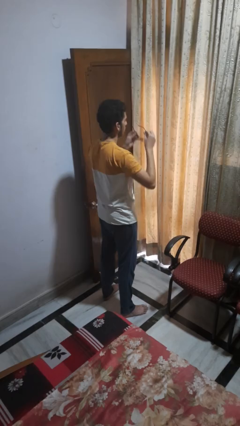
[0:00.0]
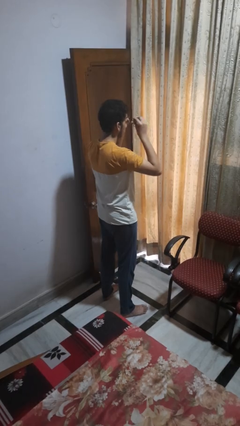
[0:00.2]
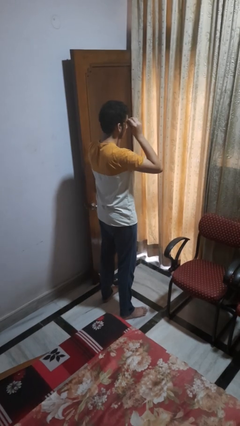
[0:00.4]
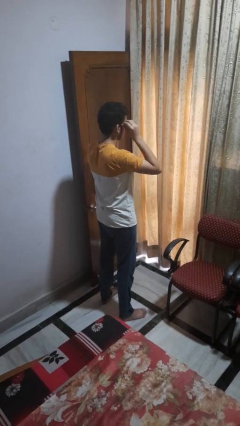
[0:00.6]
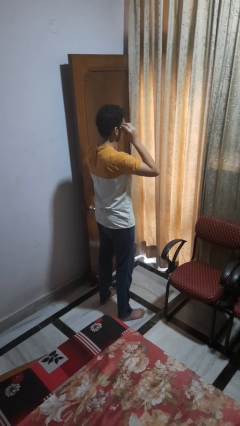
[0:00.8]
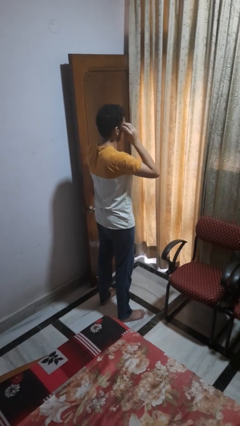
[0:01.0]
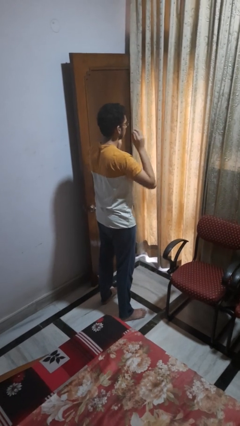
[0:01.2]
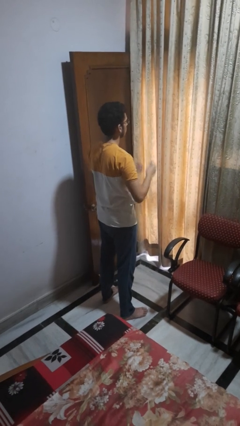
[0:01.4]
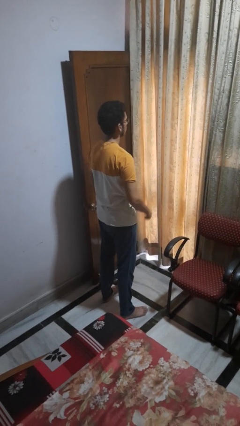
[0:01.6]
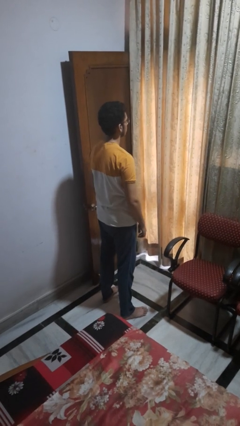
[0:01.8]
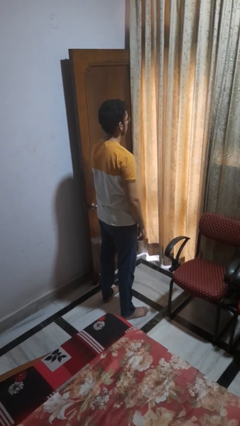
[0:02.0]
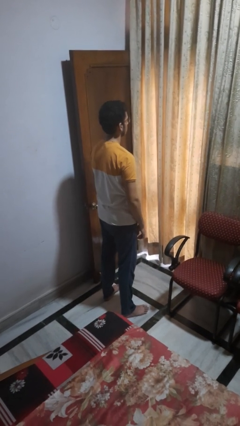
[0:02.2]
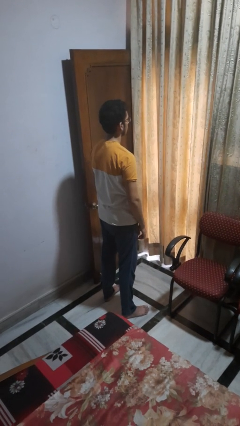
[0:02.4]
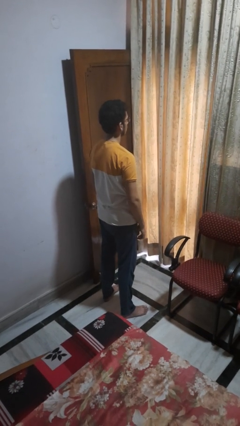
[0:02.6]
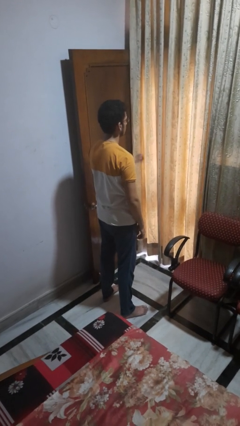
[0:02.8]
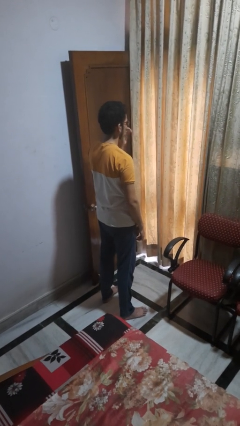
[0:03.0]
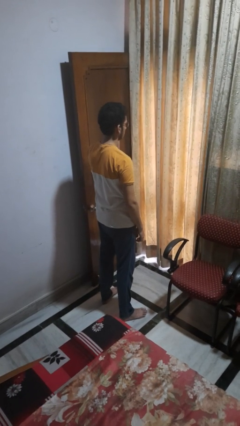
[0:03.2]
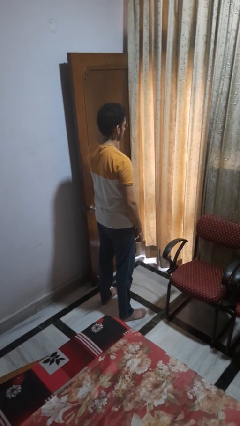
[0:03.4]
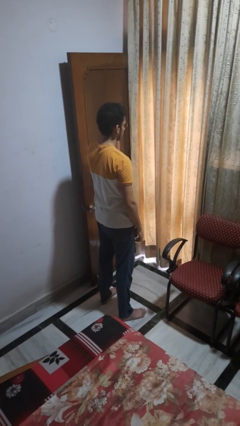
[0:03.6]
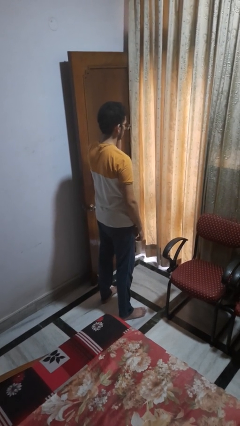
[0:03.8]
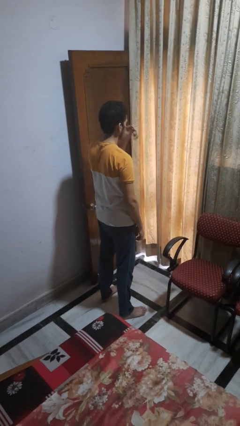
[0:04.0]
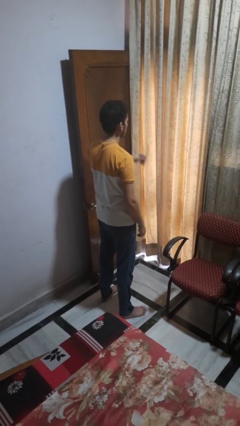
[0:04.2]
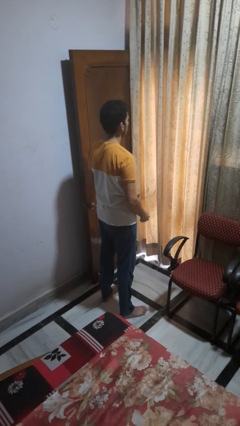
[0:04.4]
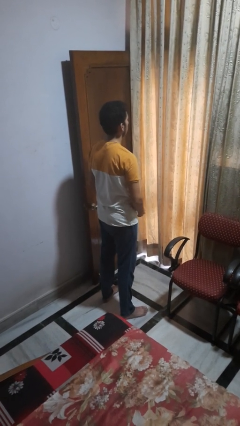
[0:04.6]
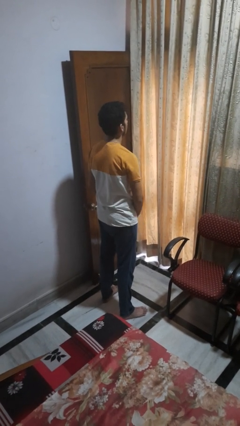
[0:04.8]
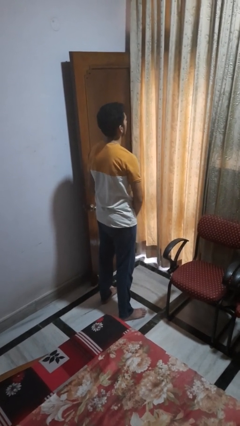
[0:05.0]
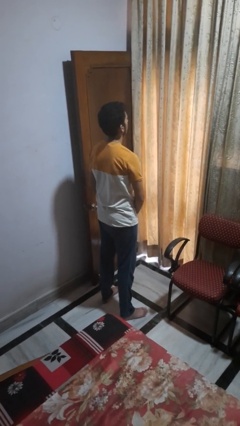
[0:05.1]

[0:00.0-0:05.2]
person puts on glasses

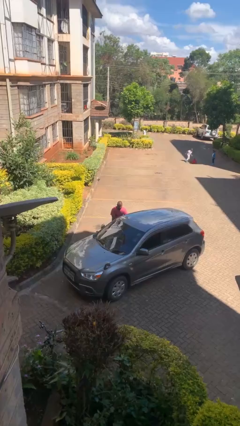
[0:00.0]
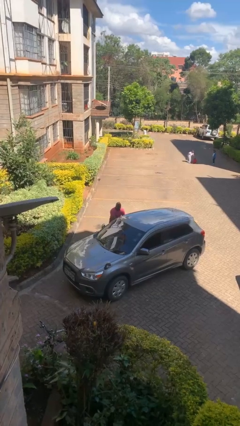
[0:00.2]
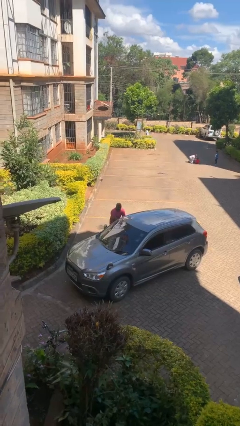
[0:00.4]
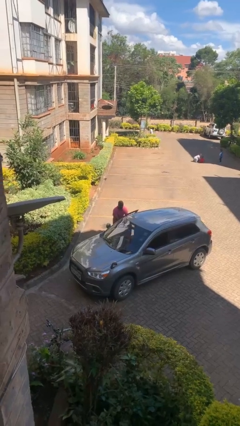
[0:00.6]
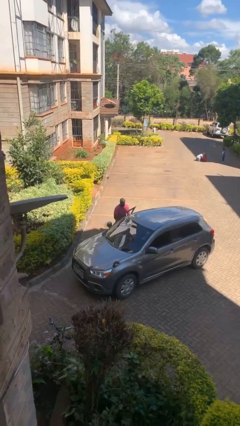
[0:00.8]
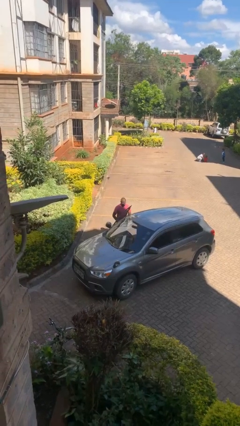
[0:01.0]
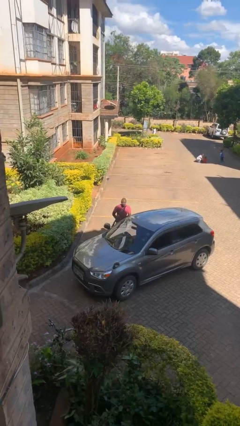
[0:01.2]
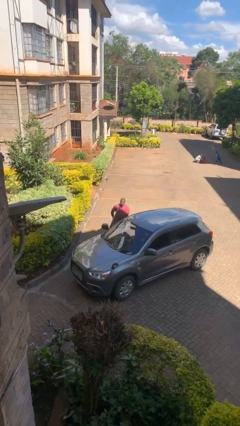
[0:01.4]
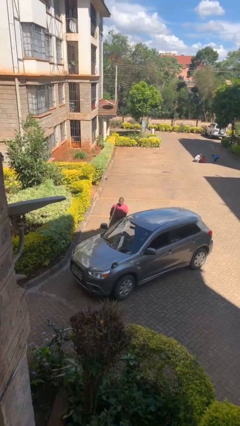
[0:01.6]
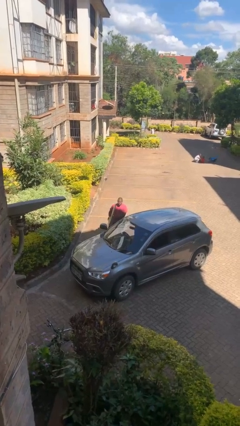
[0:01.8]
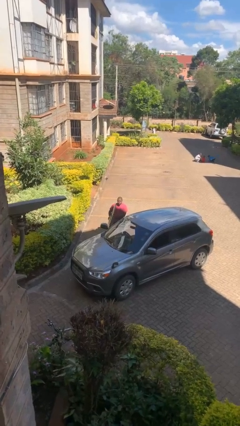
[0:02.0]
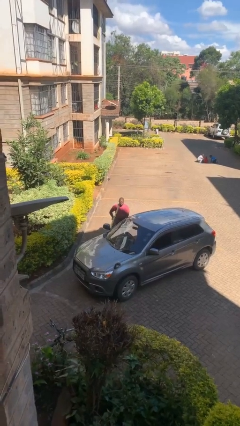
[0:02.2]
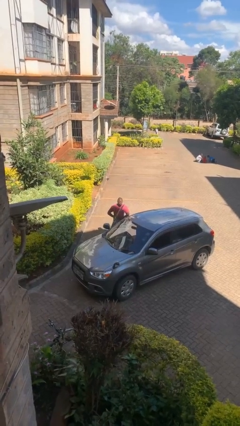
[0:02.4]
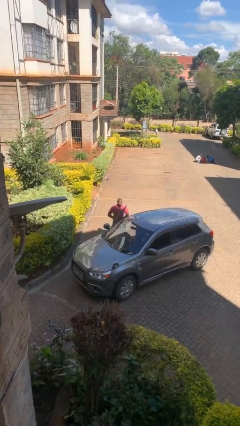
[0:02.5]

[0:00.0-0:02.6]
person opens car door

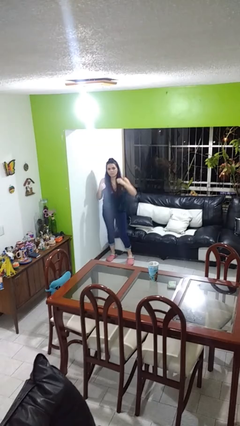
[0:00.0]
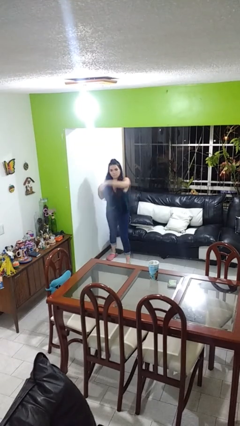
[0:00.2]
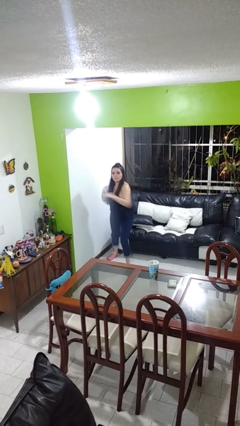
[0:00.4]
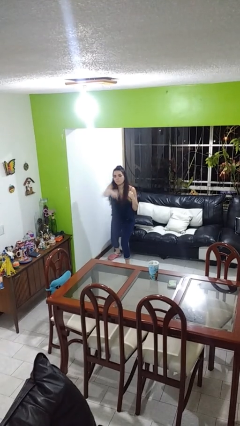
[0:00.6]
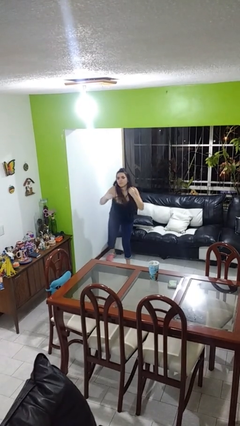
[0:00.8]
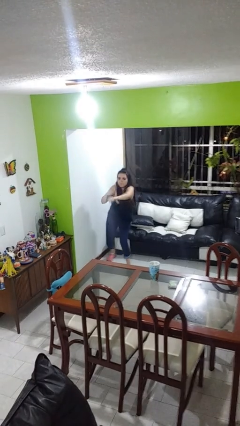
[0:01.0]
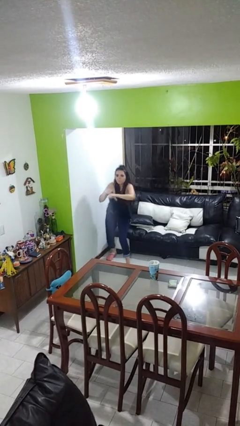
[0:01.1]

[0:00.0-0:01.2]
person punches

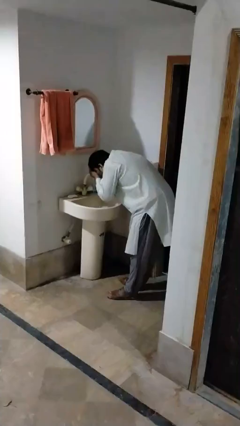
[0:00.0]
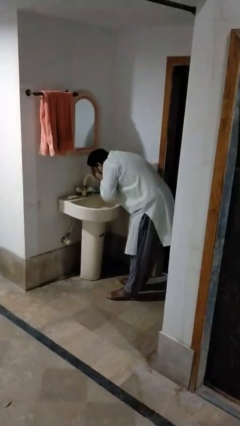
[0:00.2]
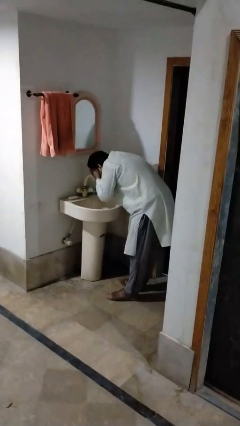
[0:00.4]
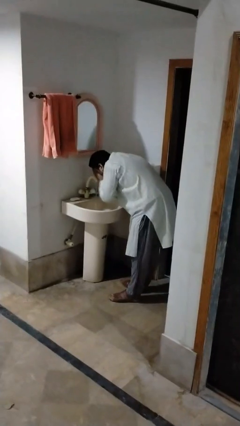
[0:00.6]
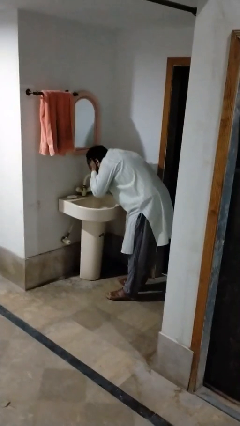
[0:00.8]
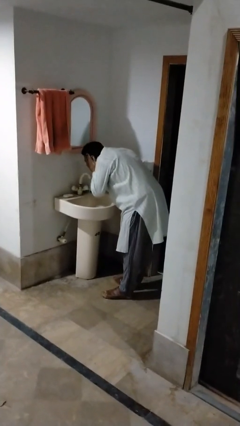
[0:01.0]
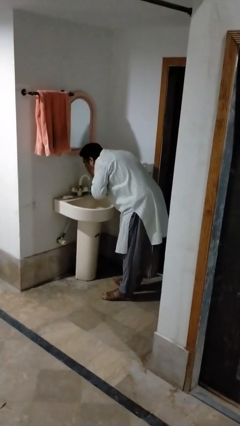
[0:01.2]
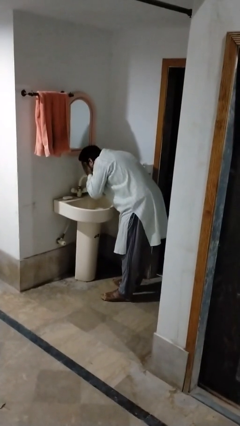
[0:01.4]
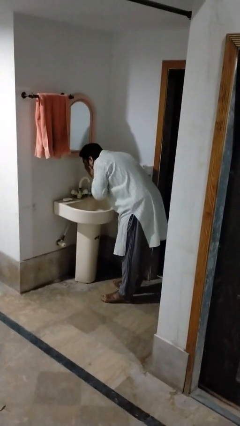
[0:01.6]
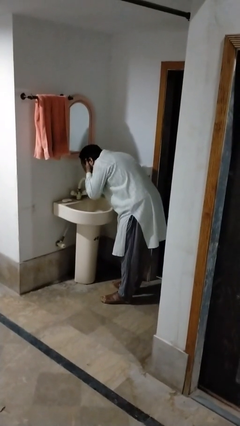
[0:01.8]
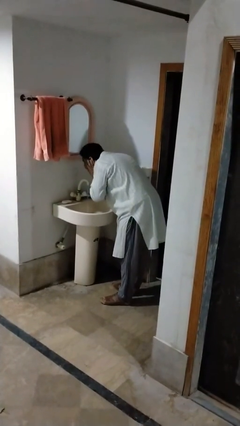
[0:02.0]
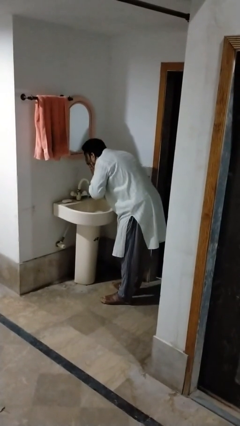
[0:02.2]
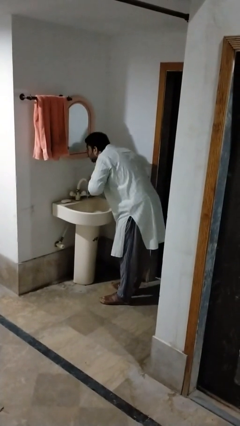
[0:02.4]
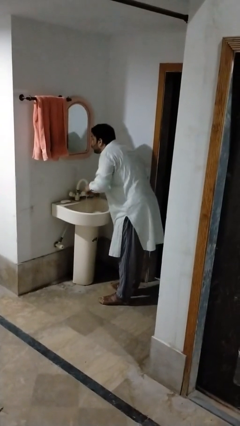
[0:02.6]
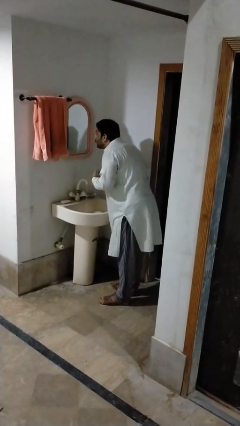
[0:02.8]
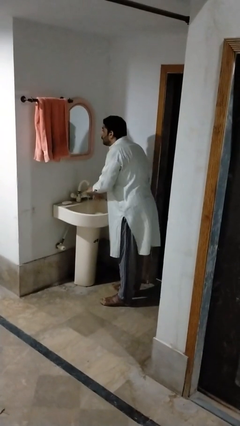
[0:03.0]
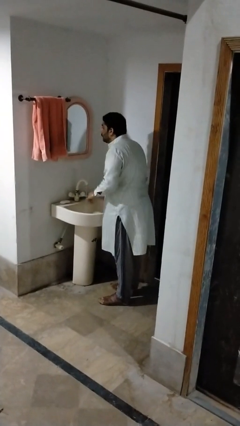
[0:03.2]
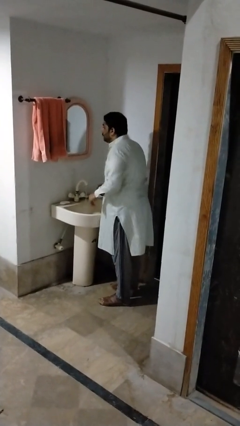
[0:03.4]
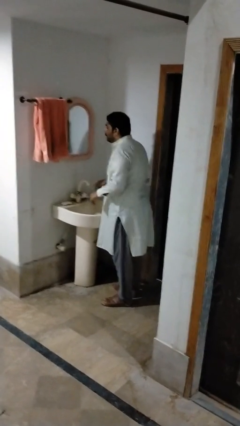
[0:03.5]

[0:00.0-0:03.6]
person washes face

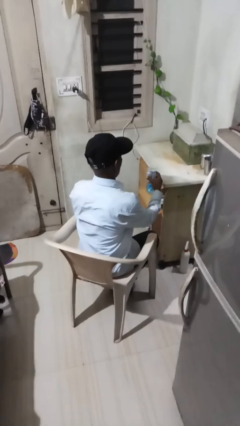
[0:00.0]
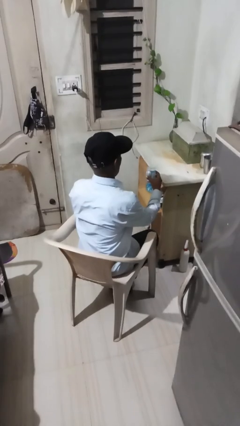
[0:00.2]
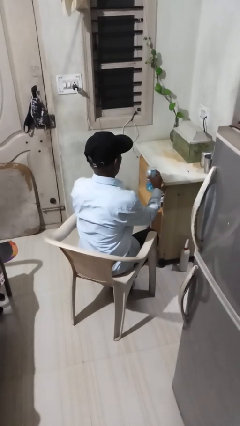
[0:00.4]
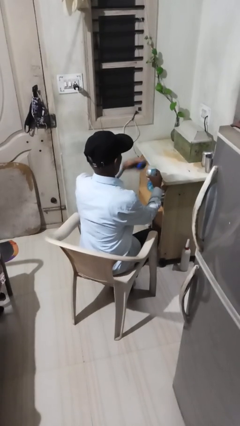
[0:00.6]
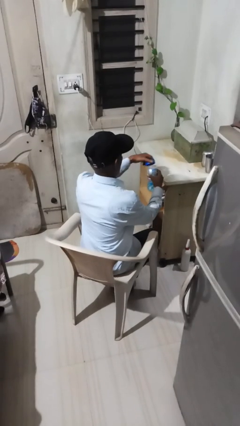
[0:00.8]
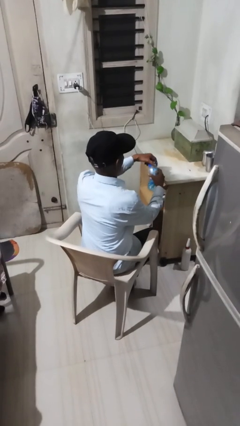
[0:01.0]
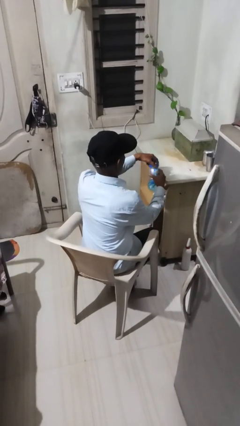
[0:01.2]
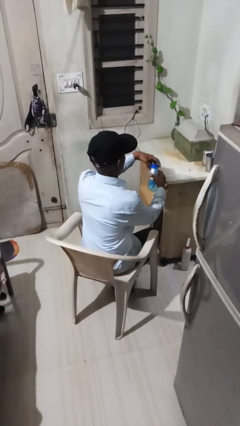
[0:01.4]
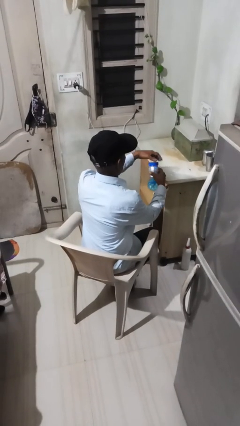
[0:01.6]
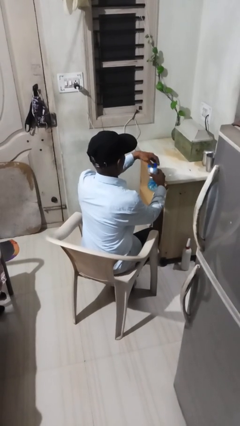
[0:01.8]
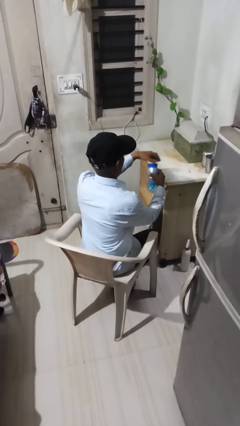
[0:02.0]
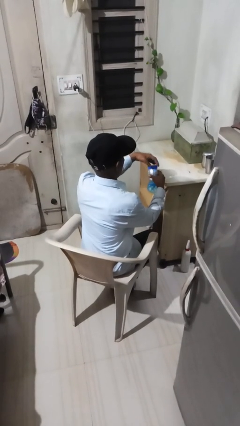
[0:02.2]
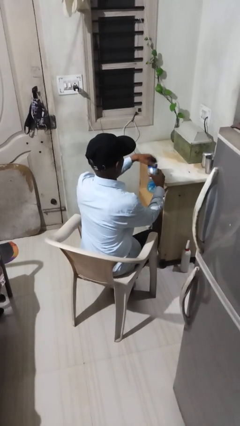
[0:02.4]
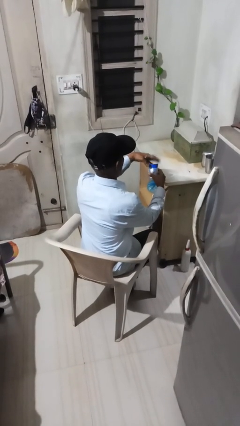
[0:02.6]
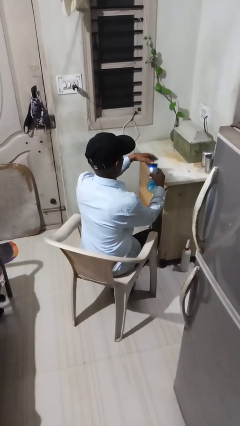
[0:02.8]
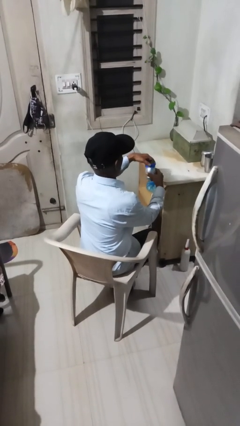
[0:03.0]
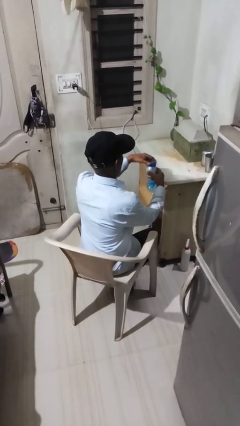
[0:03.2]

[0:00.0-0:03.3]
person closes jar

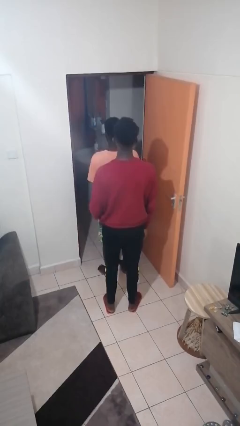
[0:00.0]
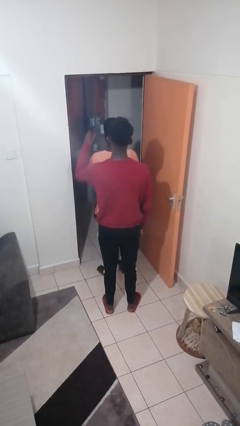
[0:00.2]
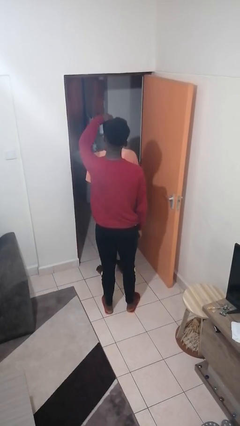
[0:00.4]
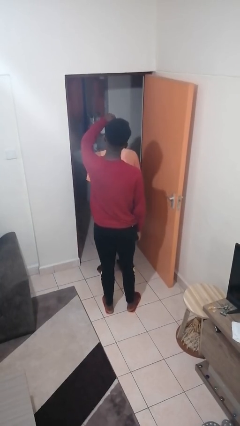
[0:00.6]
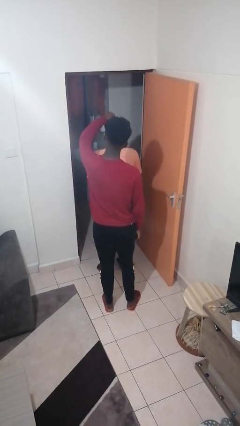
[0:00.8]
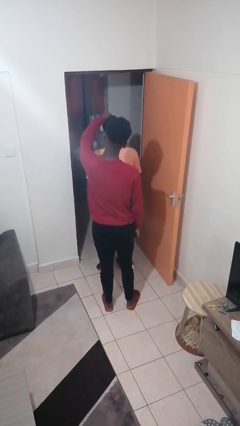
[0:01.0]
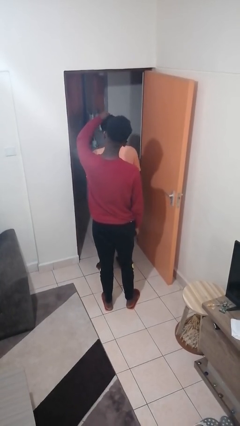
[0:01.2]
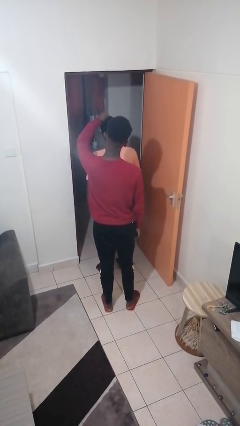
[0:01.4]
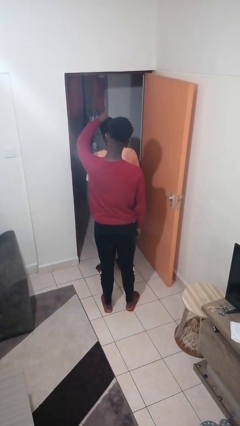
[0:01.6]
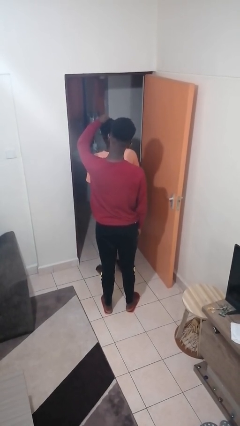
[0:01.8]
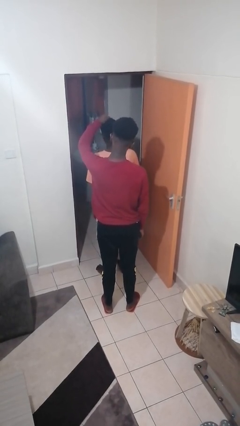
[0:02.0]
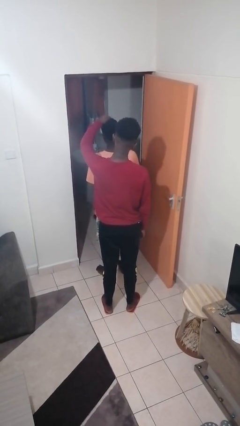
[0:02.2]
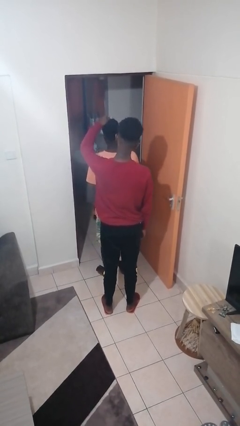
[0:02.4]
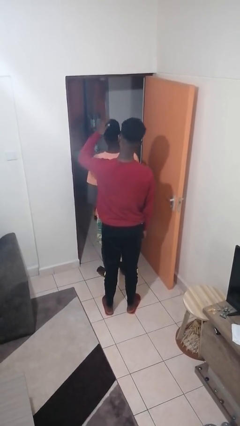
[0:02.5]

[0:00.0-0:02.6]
person grabs person by hair
